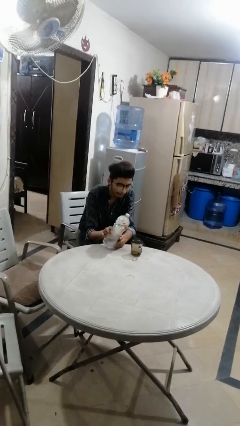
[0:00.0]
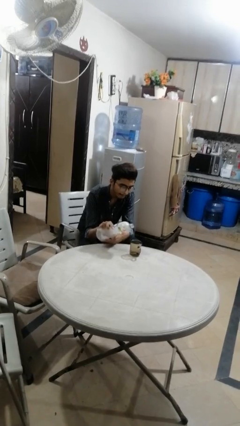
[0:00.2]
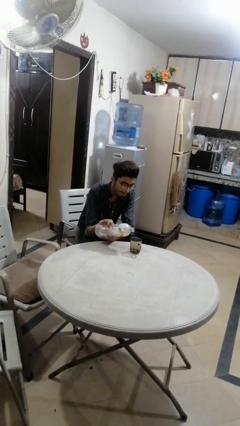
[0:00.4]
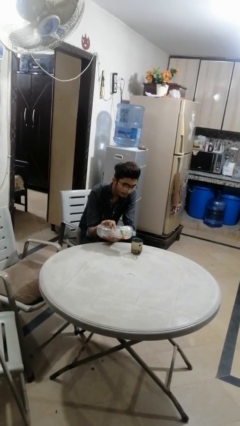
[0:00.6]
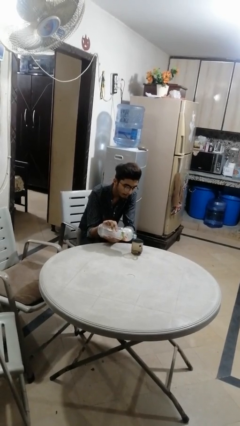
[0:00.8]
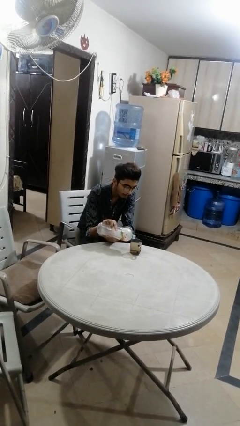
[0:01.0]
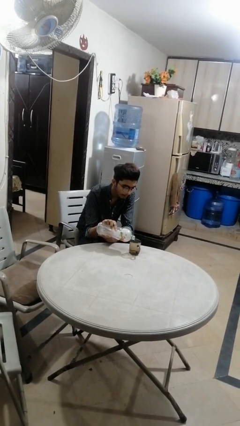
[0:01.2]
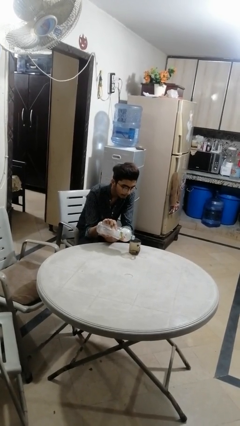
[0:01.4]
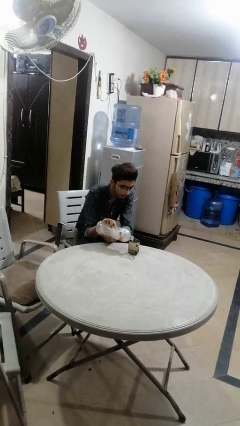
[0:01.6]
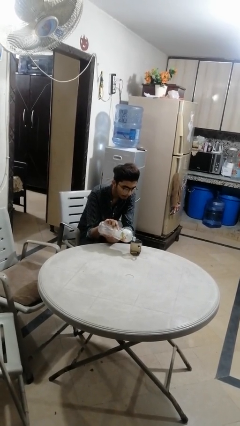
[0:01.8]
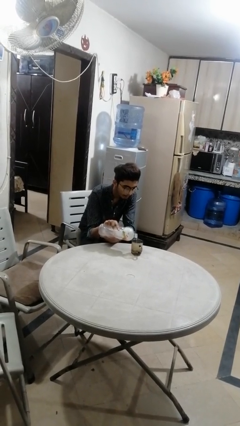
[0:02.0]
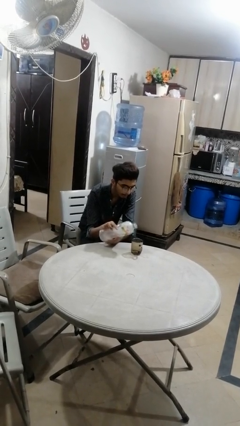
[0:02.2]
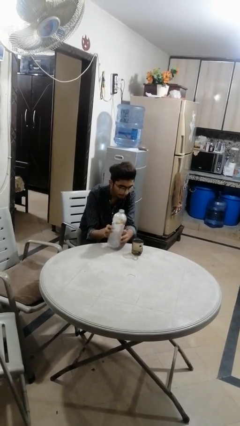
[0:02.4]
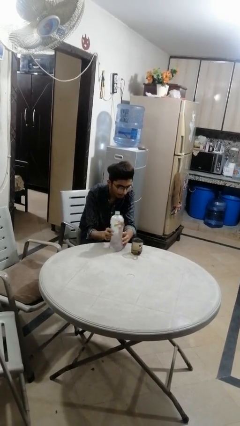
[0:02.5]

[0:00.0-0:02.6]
person pours liquid into cup

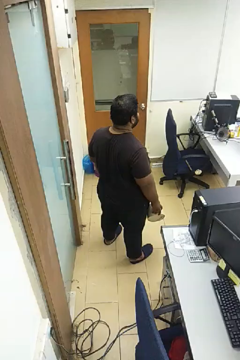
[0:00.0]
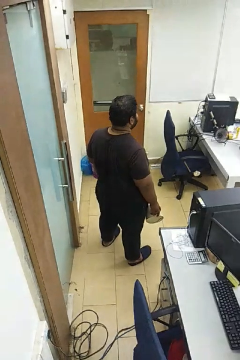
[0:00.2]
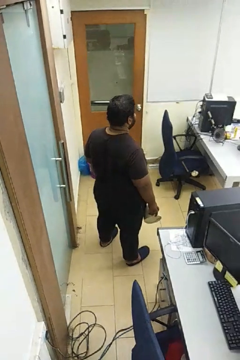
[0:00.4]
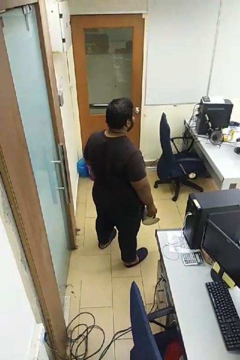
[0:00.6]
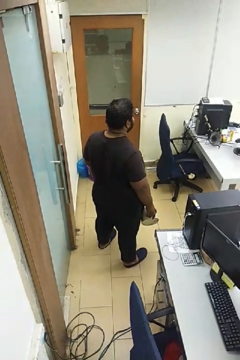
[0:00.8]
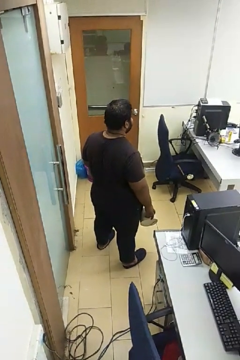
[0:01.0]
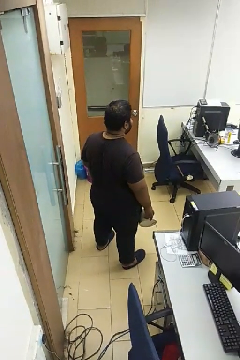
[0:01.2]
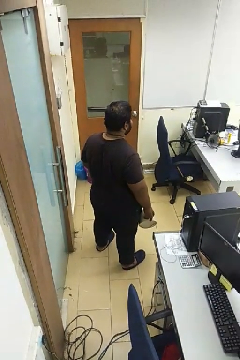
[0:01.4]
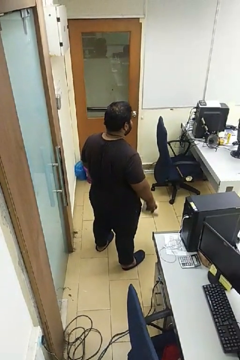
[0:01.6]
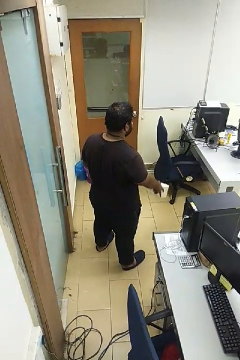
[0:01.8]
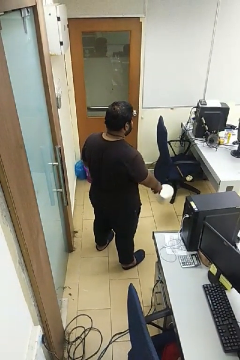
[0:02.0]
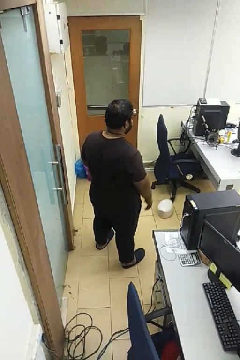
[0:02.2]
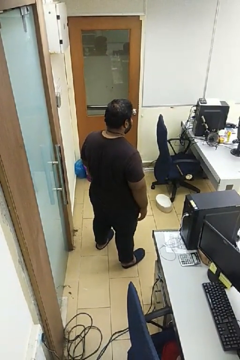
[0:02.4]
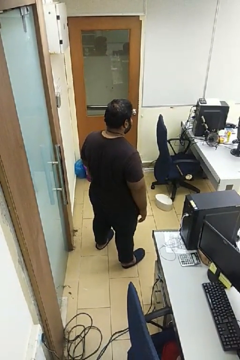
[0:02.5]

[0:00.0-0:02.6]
person throws object to ground

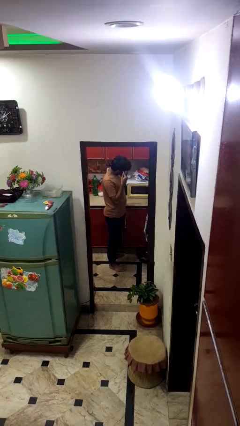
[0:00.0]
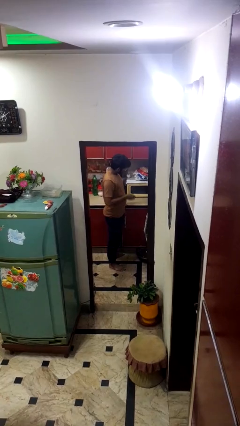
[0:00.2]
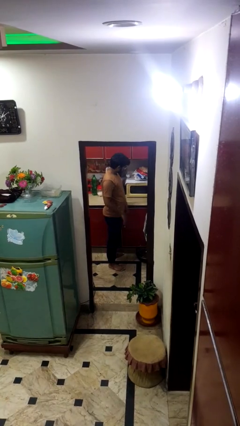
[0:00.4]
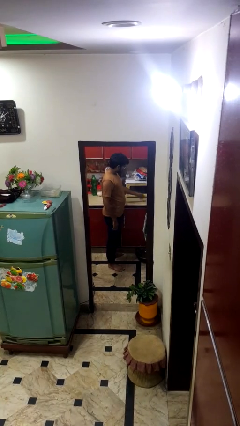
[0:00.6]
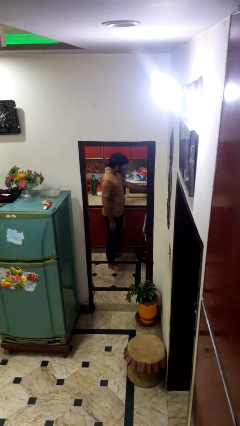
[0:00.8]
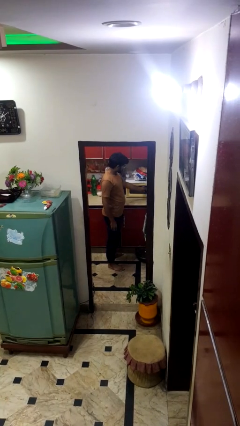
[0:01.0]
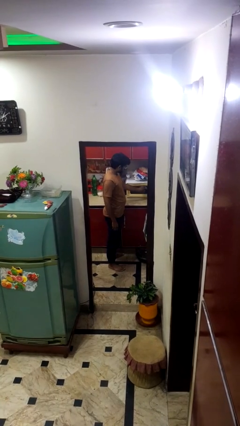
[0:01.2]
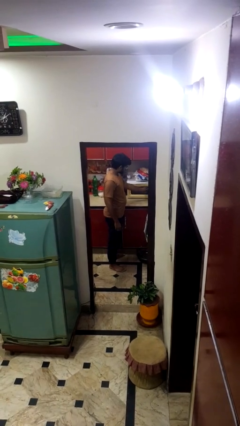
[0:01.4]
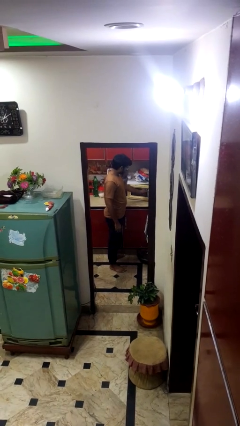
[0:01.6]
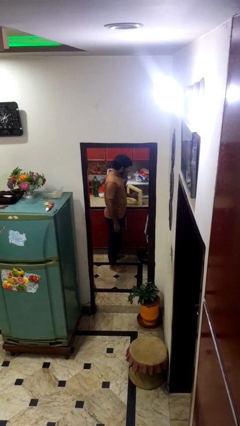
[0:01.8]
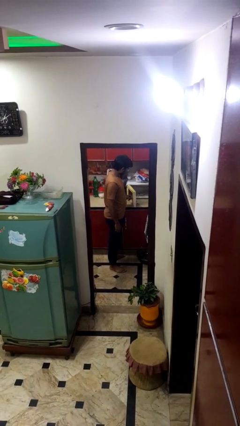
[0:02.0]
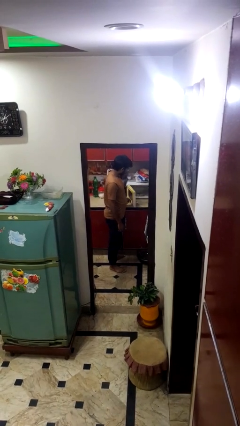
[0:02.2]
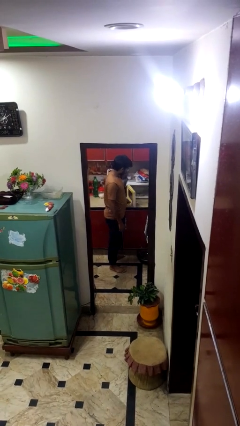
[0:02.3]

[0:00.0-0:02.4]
person opens microwave

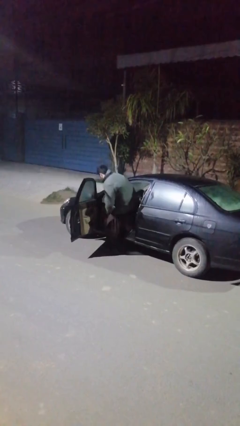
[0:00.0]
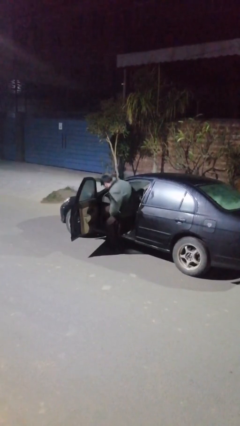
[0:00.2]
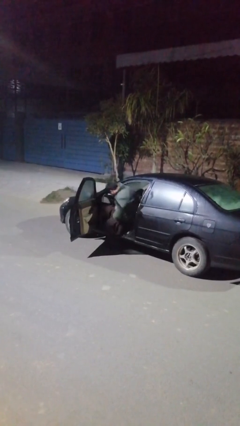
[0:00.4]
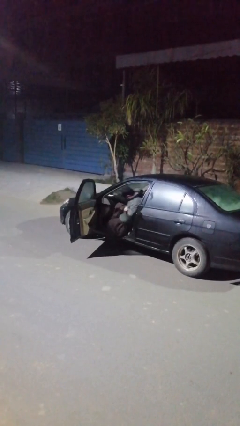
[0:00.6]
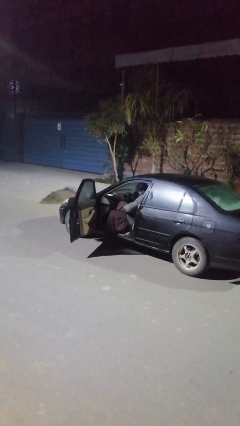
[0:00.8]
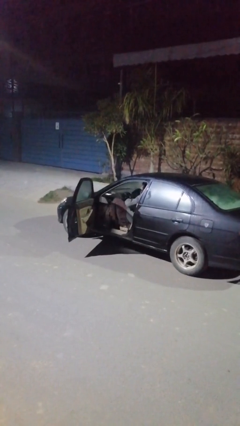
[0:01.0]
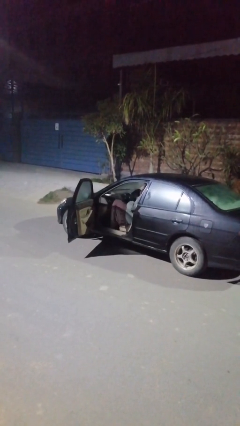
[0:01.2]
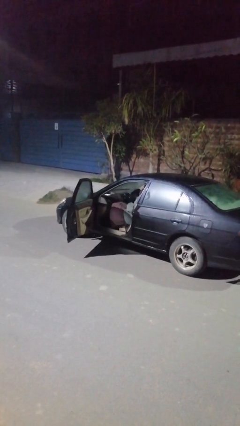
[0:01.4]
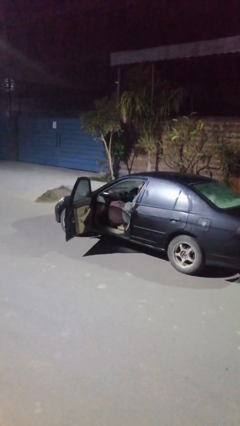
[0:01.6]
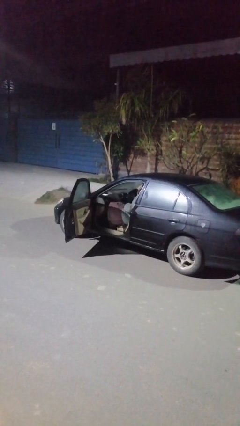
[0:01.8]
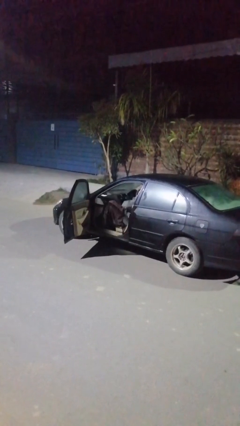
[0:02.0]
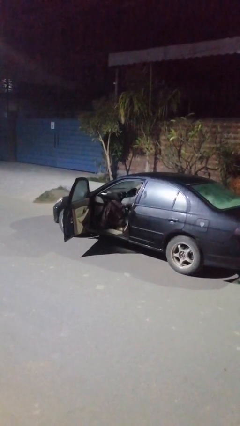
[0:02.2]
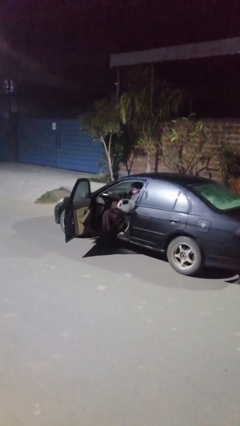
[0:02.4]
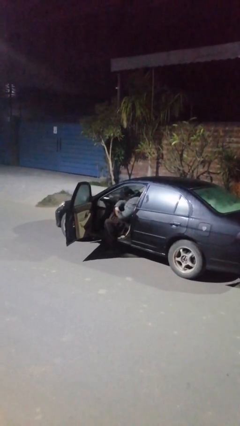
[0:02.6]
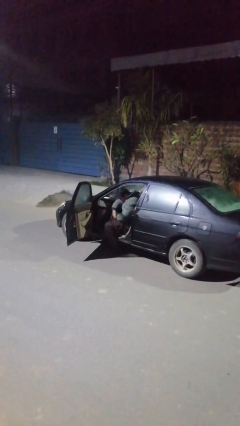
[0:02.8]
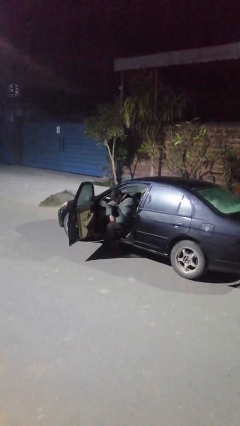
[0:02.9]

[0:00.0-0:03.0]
person enters car

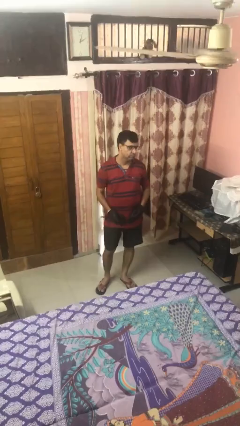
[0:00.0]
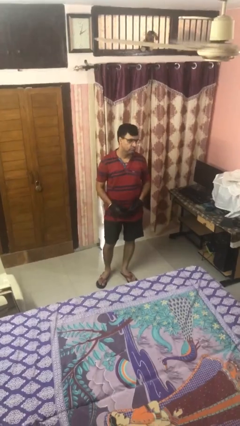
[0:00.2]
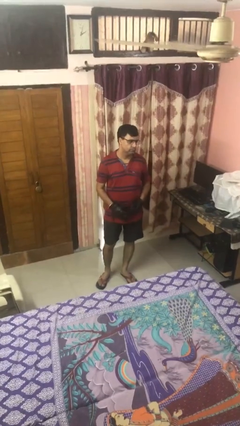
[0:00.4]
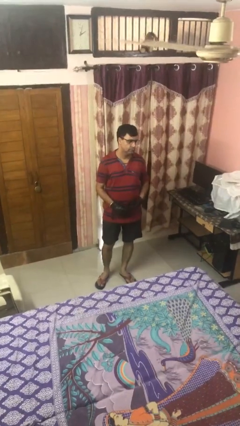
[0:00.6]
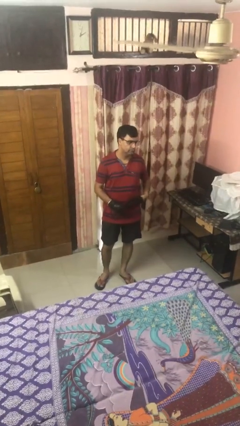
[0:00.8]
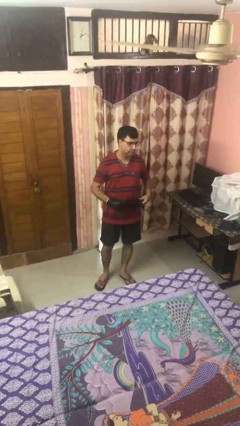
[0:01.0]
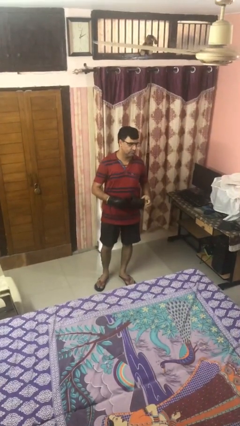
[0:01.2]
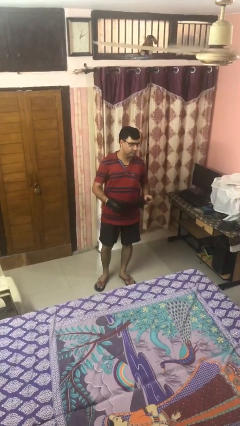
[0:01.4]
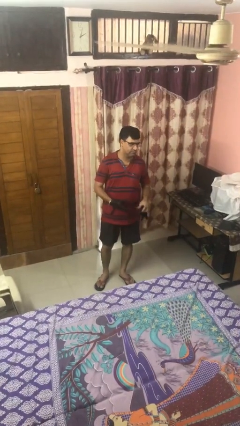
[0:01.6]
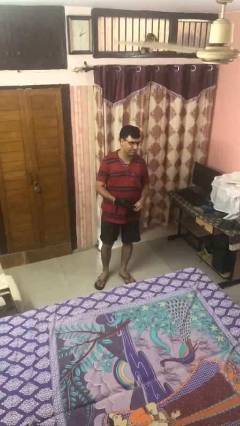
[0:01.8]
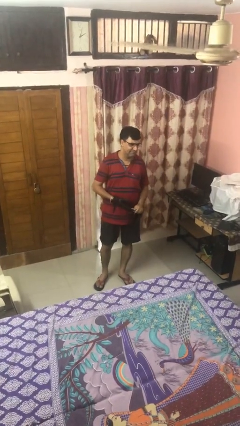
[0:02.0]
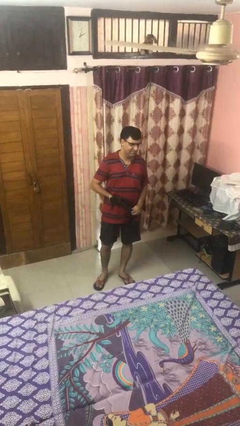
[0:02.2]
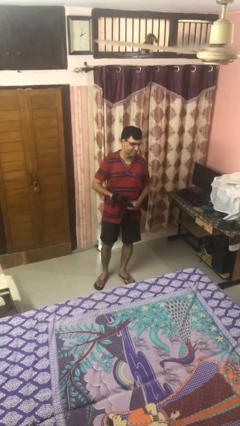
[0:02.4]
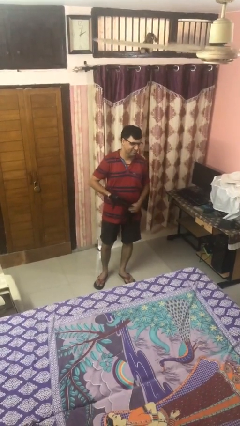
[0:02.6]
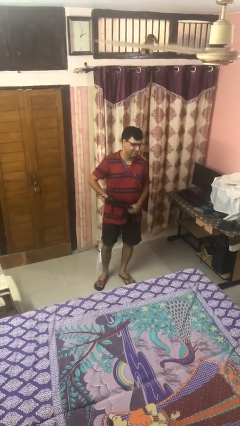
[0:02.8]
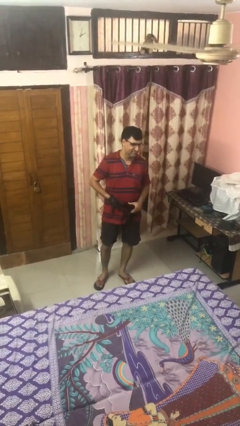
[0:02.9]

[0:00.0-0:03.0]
person takes off gloves

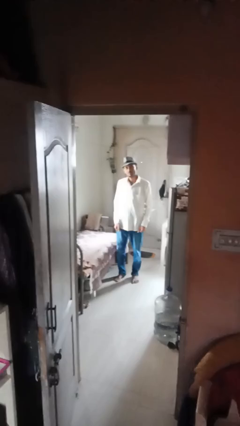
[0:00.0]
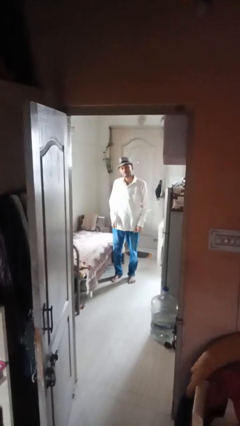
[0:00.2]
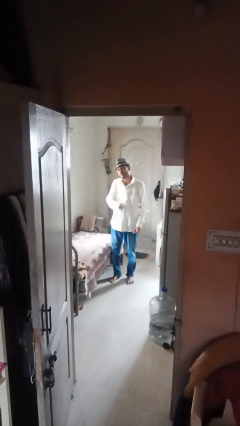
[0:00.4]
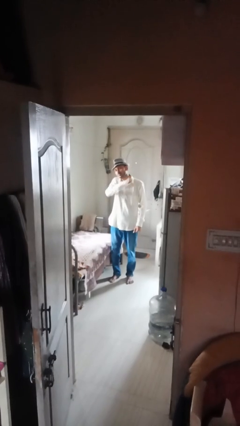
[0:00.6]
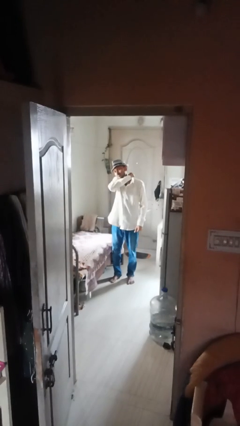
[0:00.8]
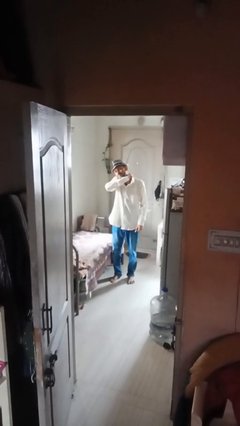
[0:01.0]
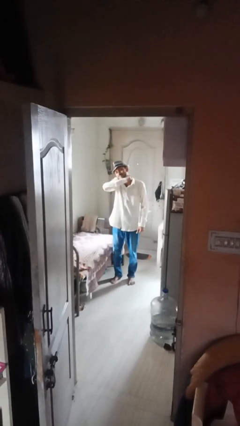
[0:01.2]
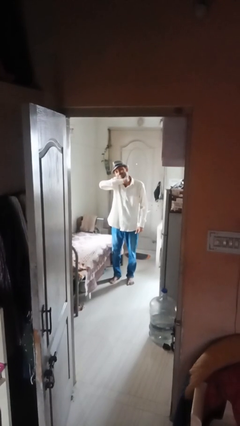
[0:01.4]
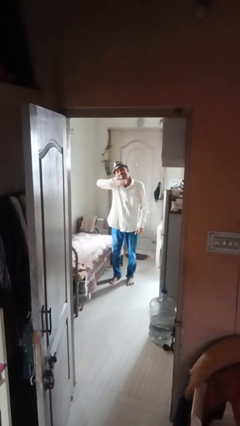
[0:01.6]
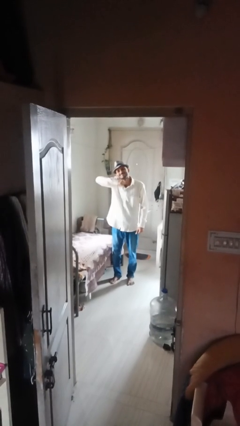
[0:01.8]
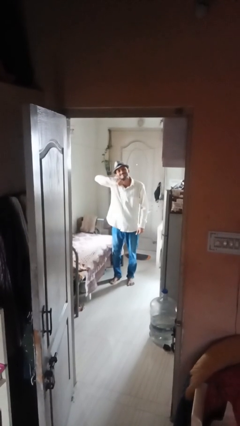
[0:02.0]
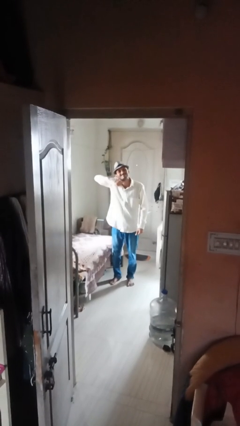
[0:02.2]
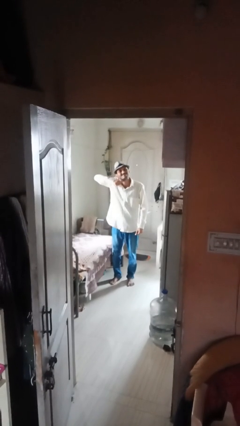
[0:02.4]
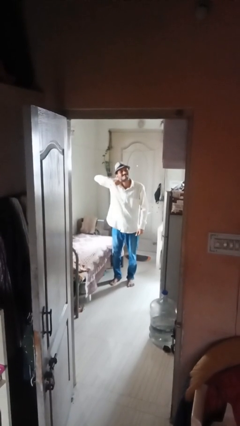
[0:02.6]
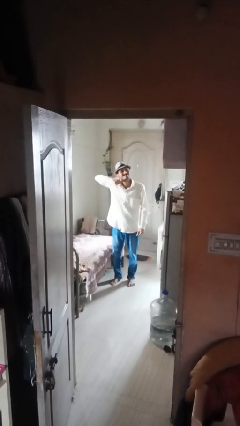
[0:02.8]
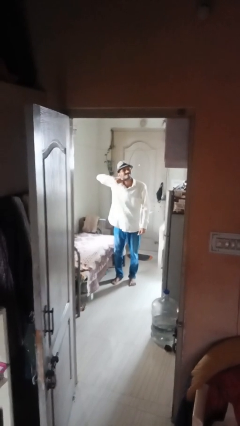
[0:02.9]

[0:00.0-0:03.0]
person gestures cut

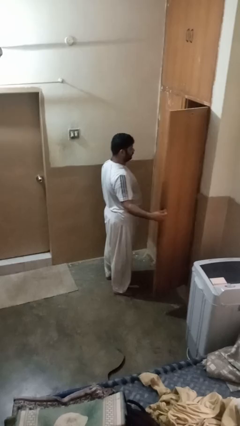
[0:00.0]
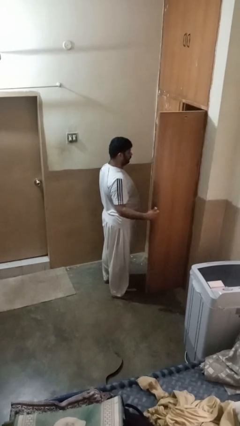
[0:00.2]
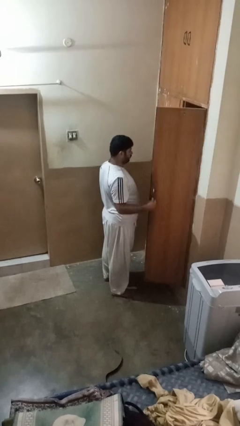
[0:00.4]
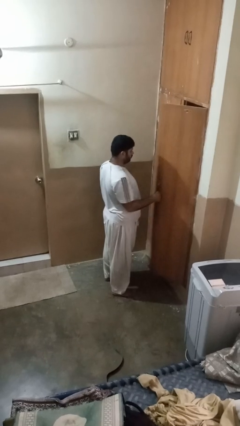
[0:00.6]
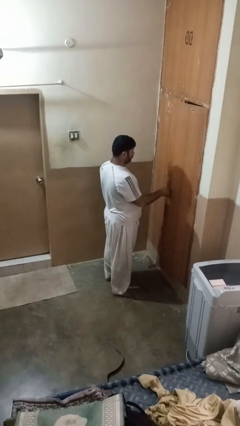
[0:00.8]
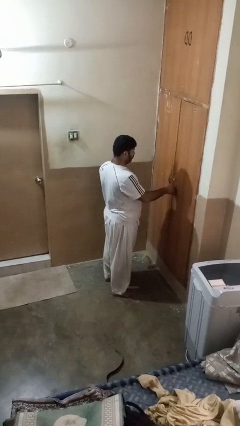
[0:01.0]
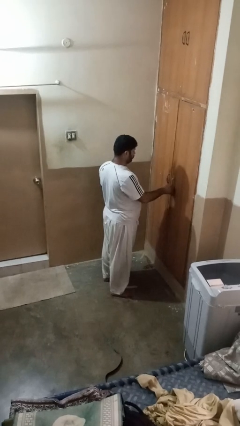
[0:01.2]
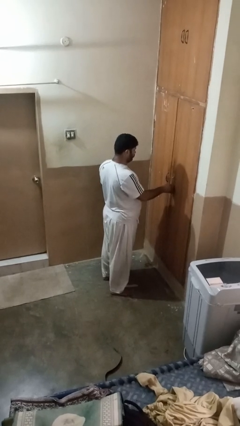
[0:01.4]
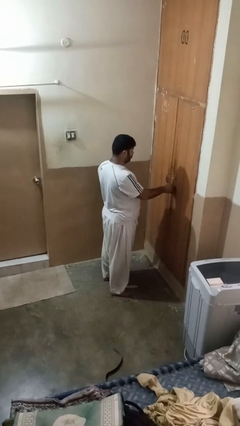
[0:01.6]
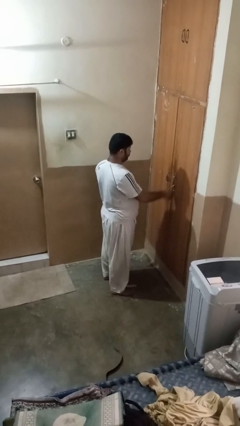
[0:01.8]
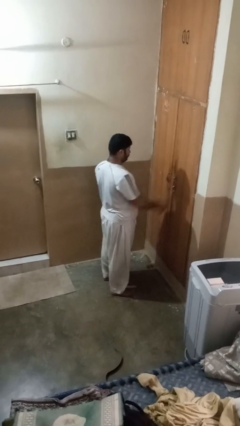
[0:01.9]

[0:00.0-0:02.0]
person closes closet door
